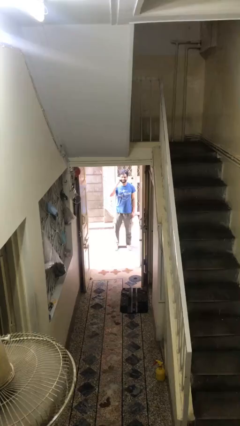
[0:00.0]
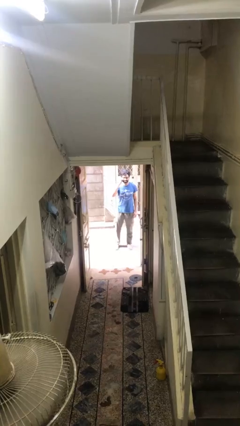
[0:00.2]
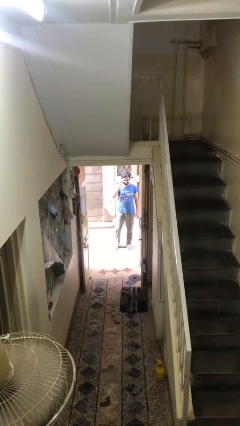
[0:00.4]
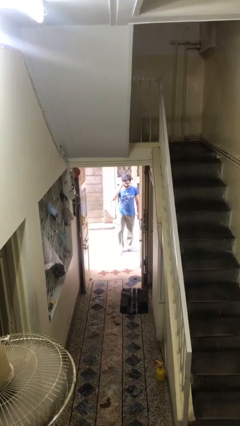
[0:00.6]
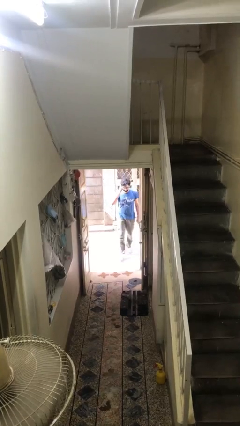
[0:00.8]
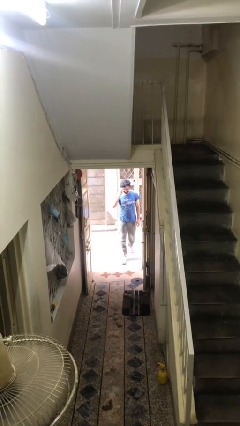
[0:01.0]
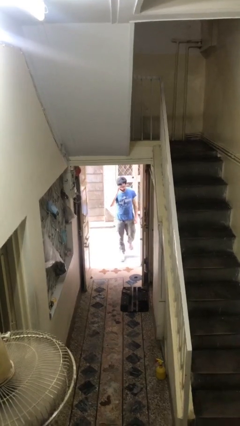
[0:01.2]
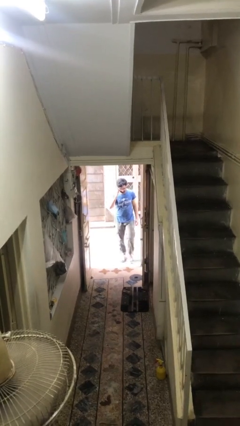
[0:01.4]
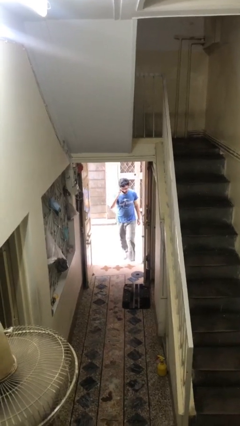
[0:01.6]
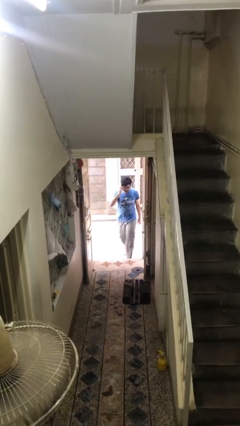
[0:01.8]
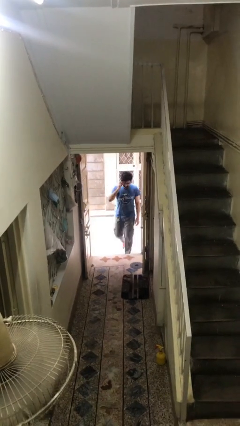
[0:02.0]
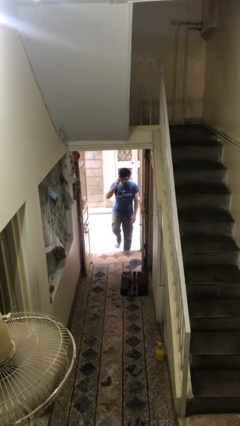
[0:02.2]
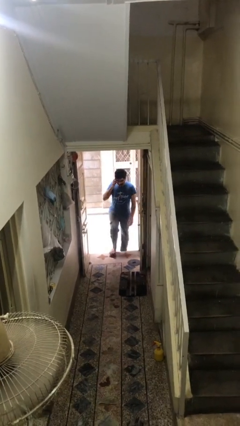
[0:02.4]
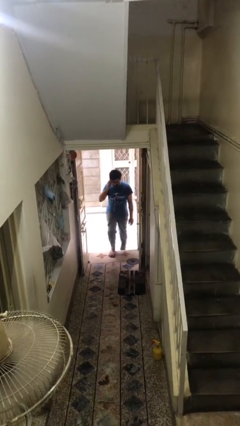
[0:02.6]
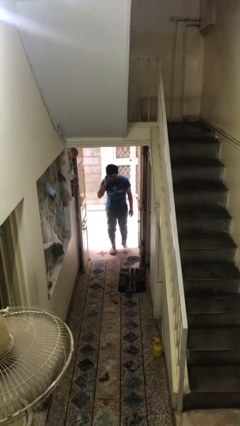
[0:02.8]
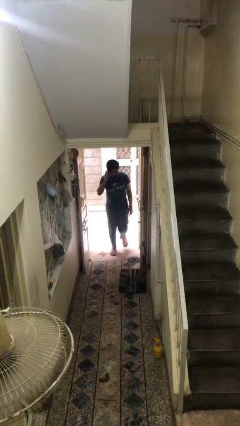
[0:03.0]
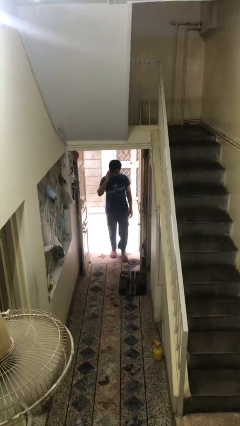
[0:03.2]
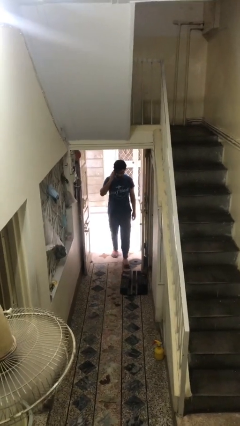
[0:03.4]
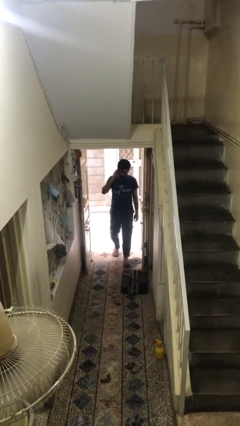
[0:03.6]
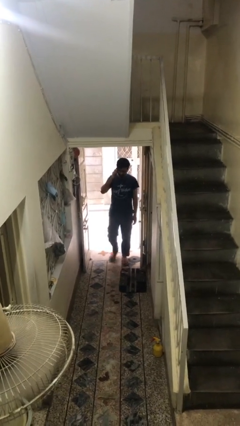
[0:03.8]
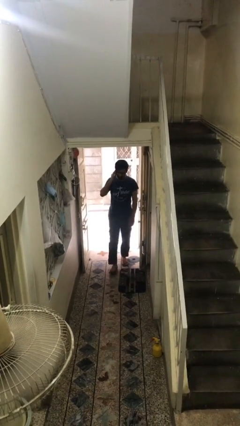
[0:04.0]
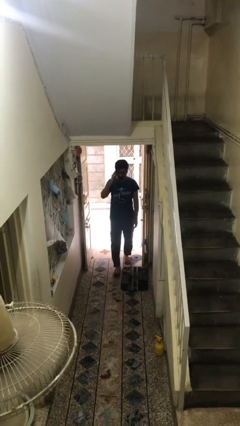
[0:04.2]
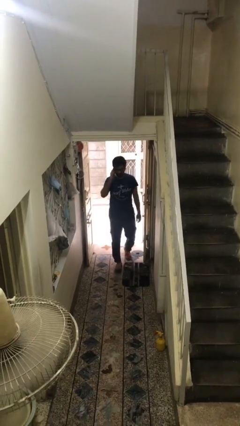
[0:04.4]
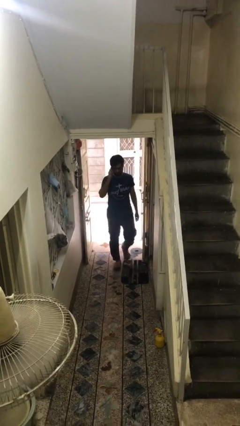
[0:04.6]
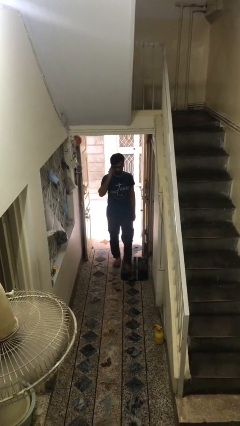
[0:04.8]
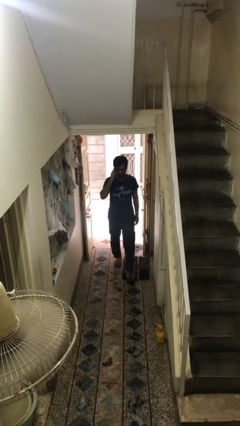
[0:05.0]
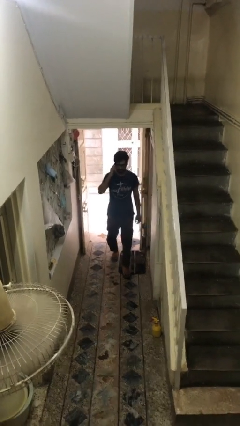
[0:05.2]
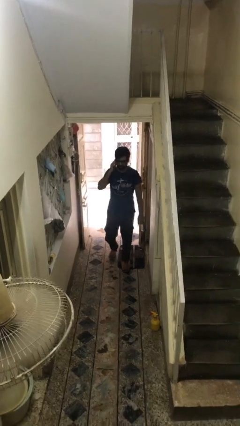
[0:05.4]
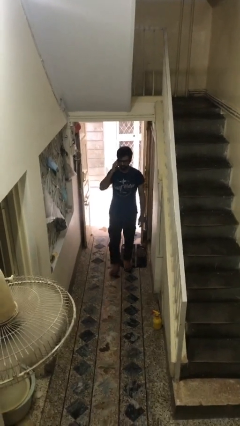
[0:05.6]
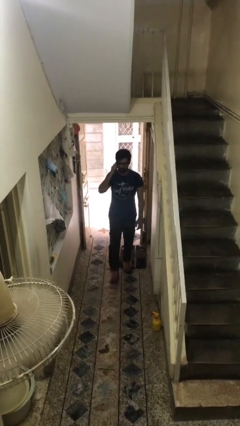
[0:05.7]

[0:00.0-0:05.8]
person enters scene through structure

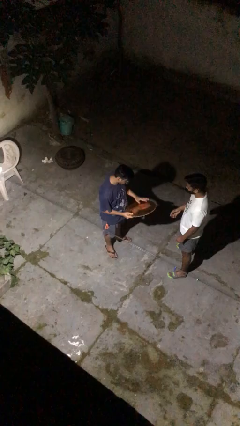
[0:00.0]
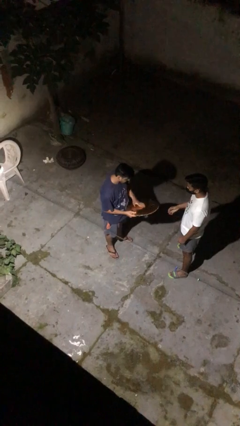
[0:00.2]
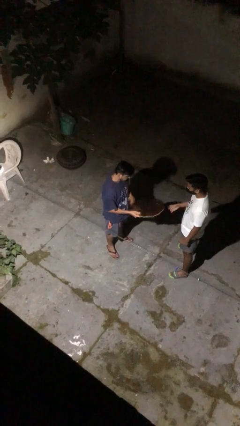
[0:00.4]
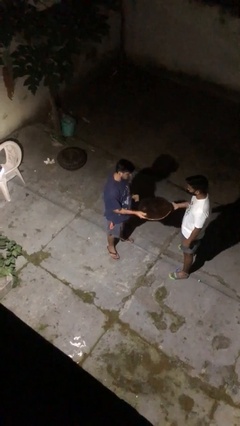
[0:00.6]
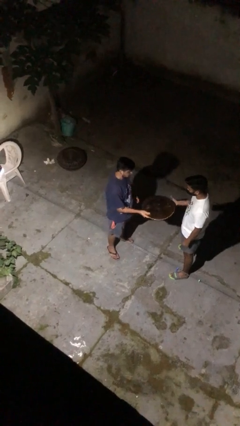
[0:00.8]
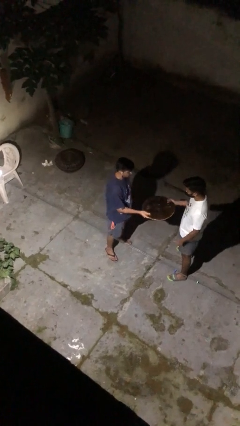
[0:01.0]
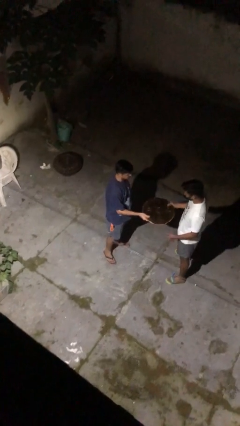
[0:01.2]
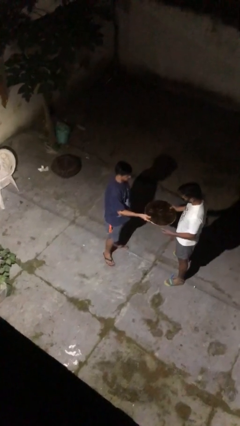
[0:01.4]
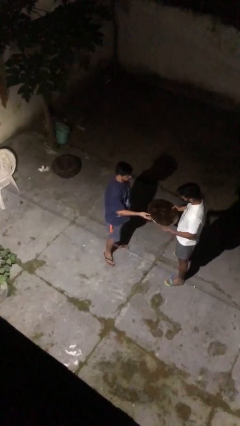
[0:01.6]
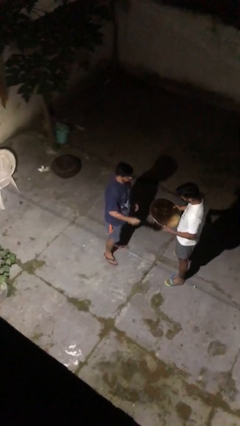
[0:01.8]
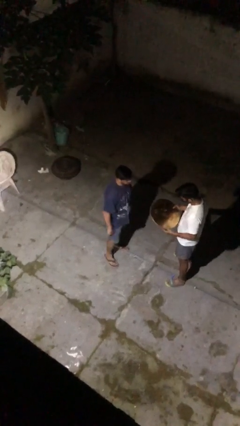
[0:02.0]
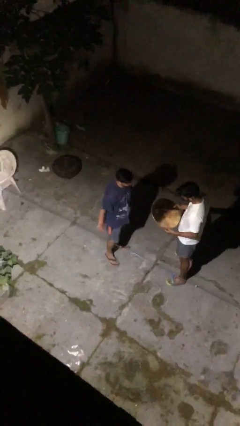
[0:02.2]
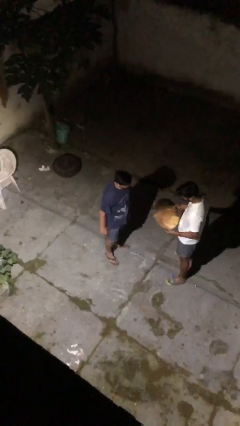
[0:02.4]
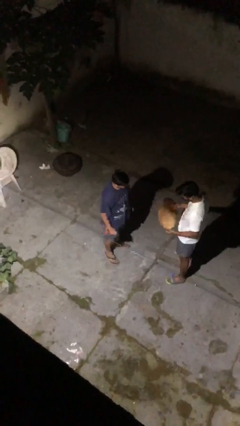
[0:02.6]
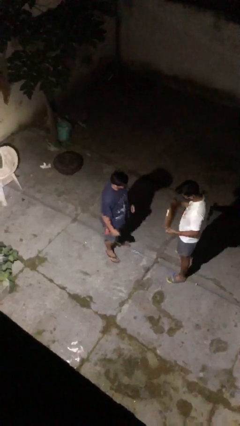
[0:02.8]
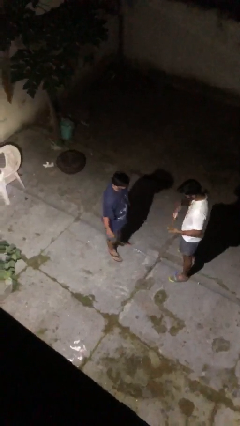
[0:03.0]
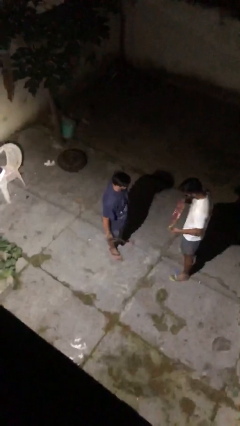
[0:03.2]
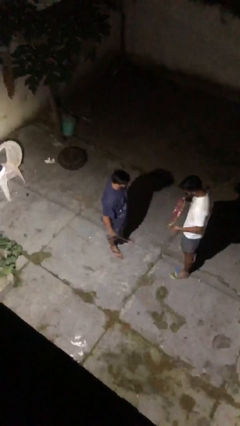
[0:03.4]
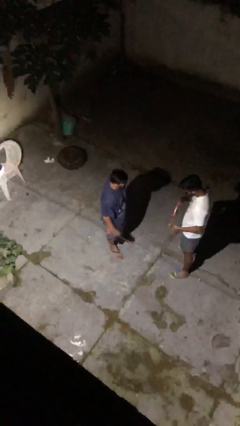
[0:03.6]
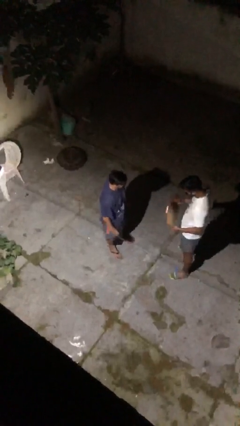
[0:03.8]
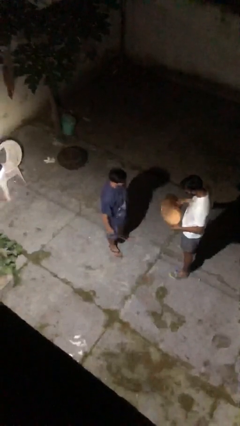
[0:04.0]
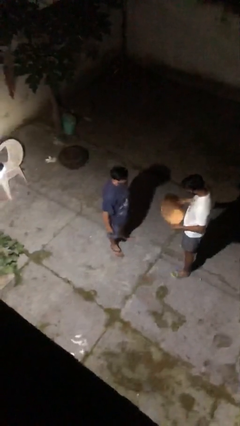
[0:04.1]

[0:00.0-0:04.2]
person transfers object to person

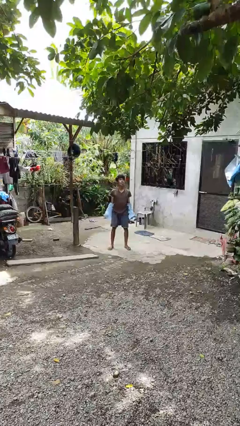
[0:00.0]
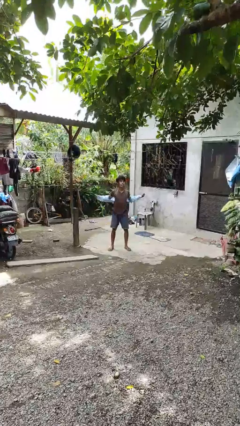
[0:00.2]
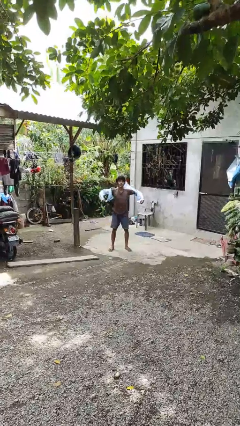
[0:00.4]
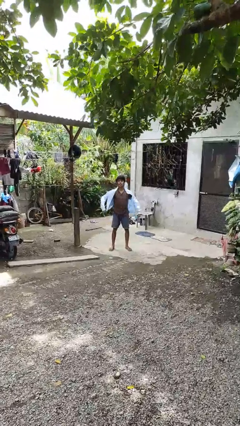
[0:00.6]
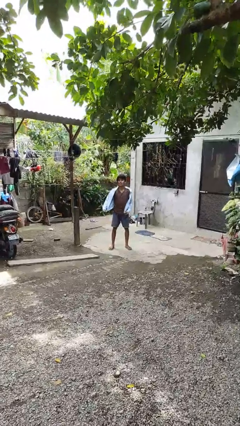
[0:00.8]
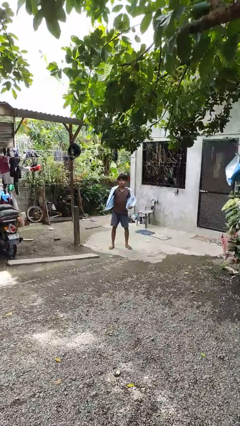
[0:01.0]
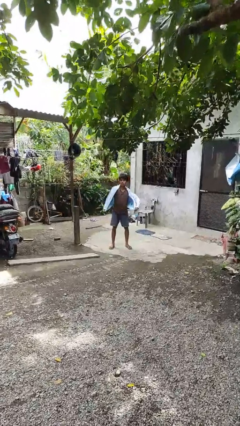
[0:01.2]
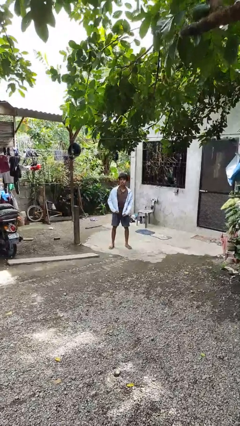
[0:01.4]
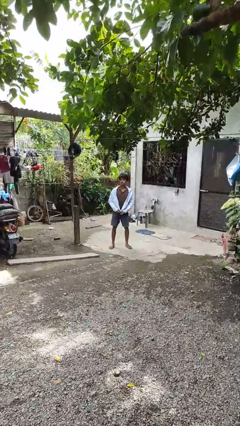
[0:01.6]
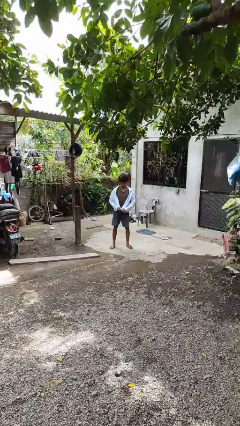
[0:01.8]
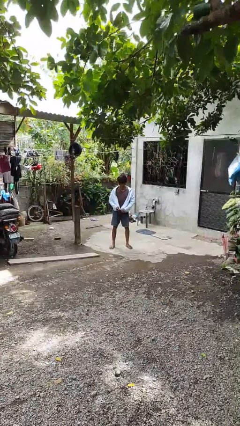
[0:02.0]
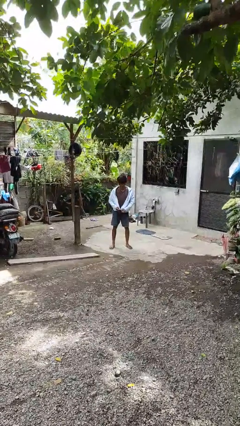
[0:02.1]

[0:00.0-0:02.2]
person puts on jacket

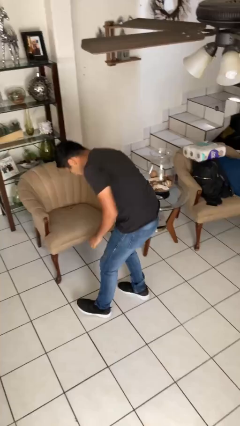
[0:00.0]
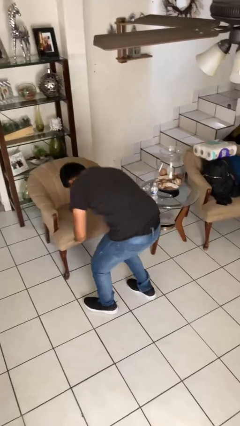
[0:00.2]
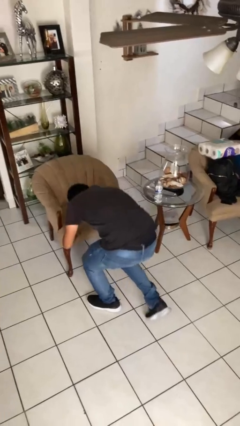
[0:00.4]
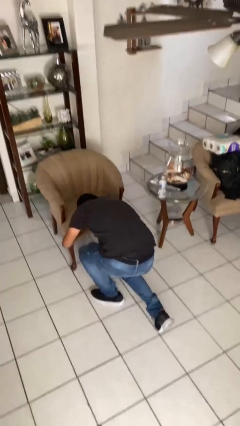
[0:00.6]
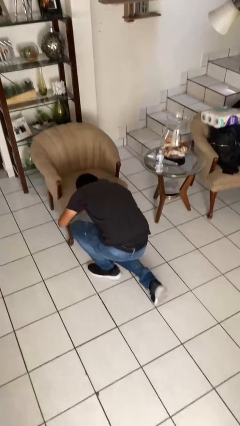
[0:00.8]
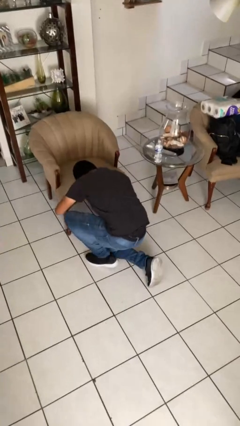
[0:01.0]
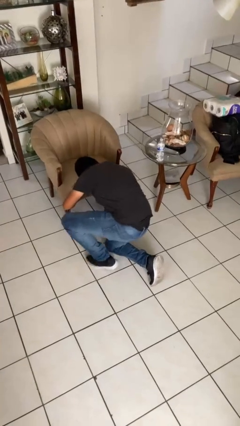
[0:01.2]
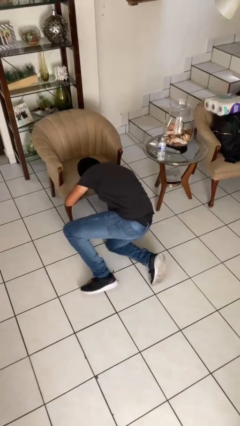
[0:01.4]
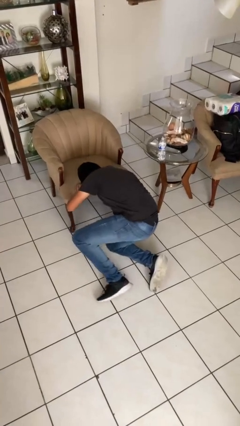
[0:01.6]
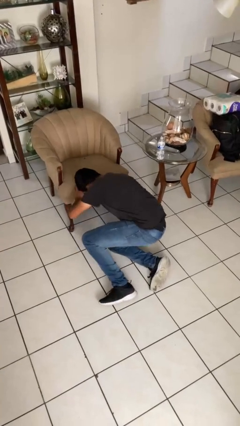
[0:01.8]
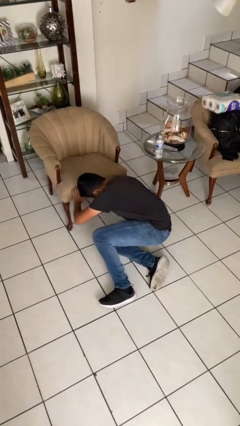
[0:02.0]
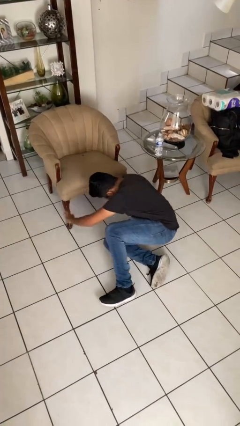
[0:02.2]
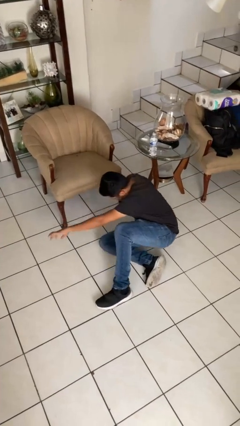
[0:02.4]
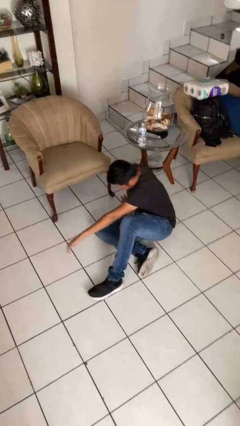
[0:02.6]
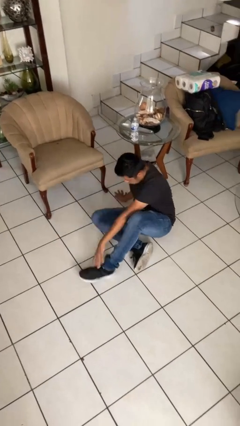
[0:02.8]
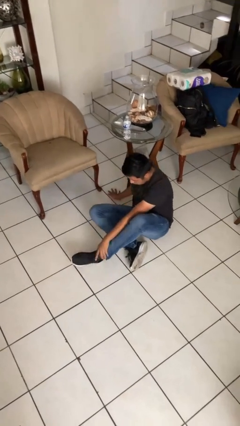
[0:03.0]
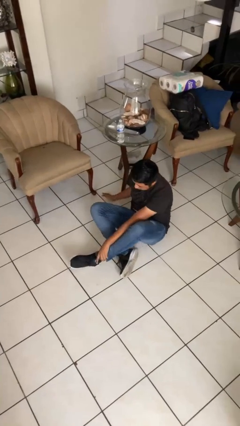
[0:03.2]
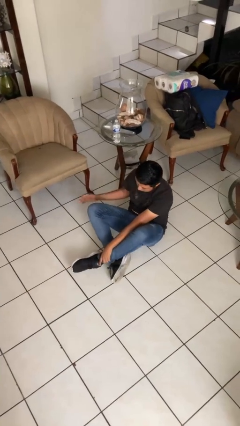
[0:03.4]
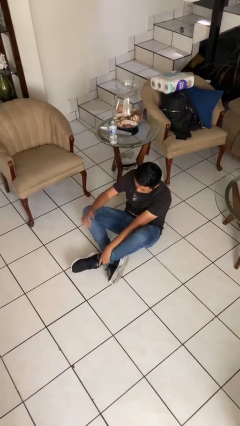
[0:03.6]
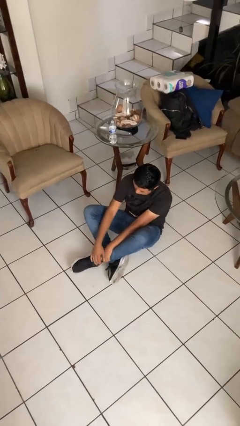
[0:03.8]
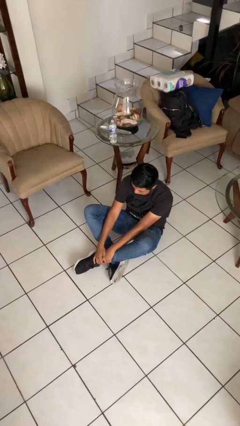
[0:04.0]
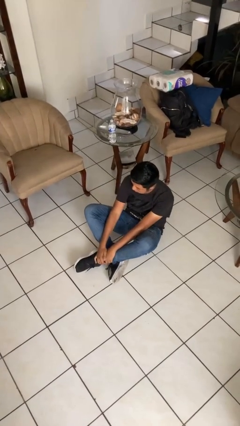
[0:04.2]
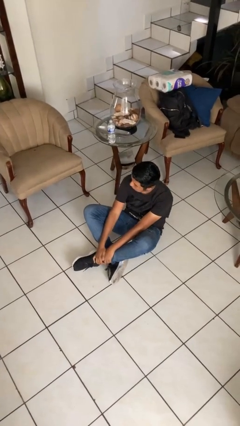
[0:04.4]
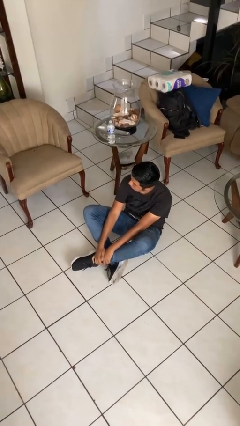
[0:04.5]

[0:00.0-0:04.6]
person sits crisscross

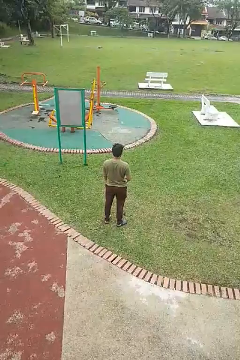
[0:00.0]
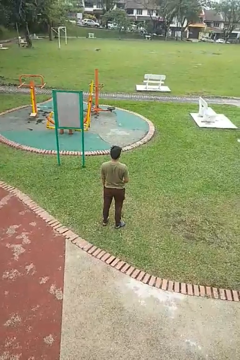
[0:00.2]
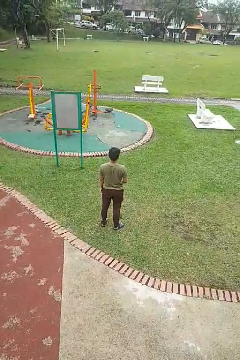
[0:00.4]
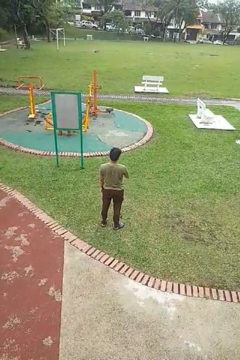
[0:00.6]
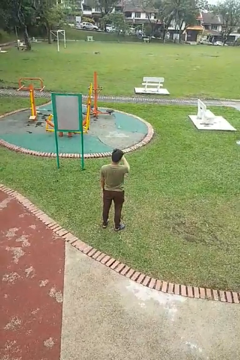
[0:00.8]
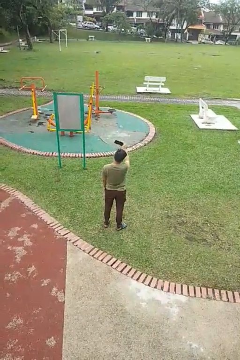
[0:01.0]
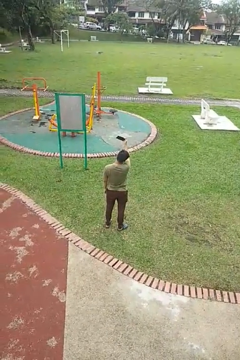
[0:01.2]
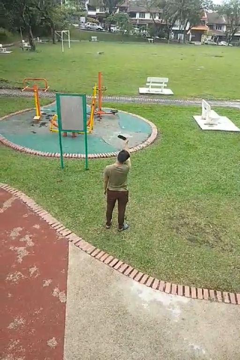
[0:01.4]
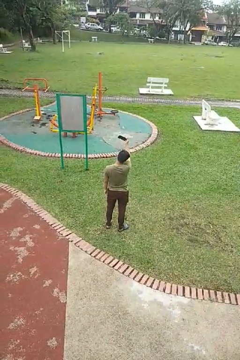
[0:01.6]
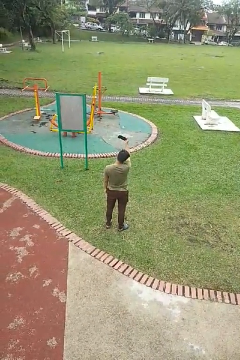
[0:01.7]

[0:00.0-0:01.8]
person takes selfie
